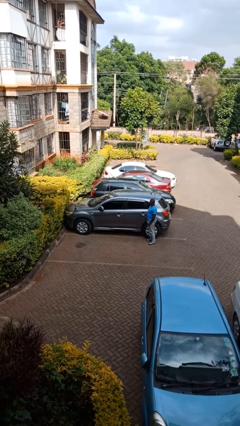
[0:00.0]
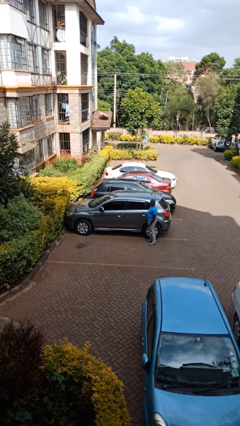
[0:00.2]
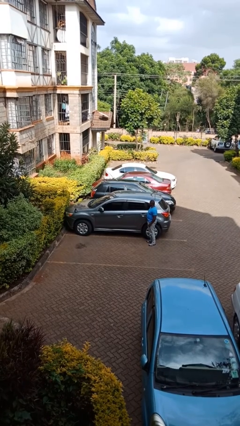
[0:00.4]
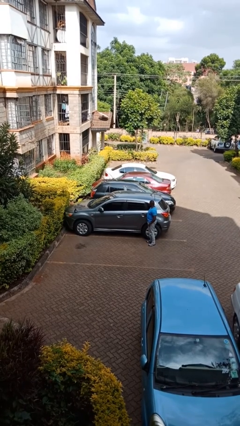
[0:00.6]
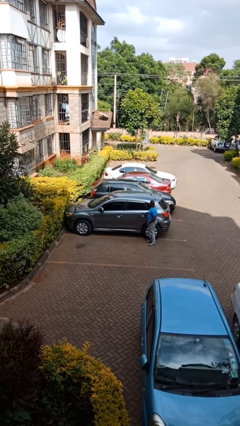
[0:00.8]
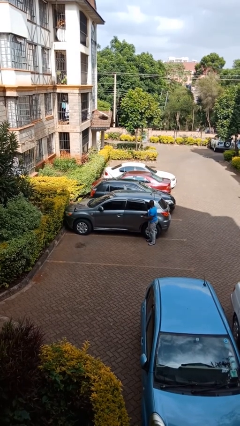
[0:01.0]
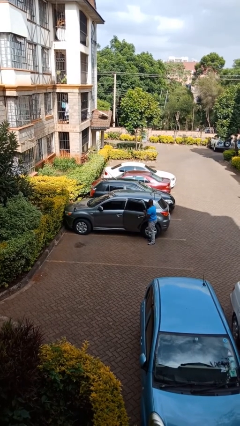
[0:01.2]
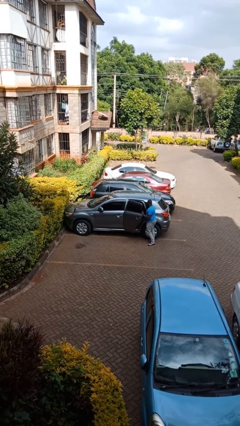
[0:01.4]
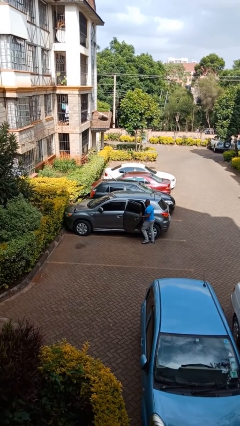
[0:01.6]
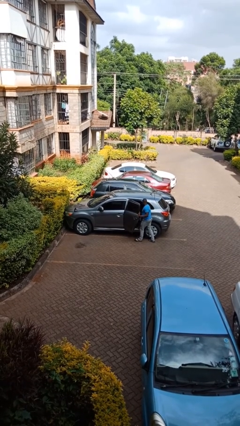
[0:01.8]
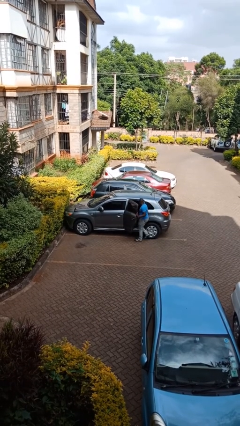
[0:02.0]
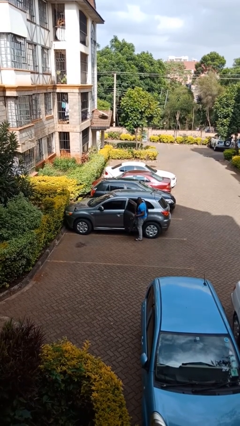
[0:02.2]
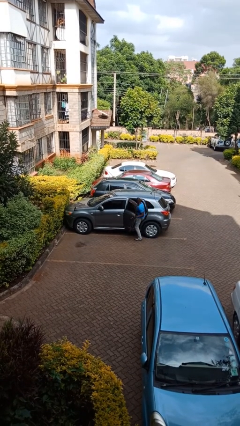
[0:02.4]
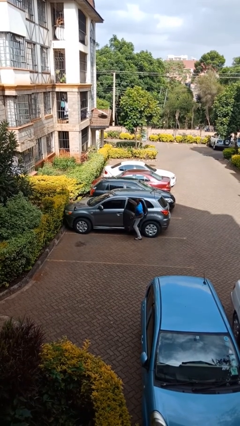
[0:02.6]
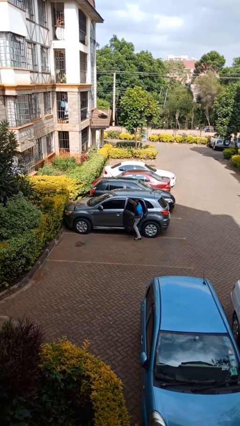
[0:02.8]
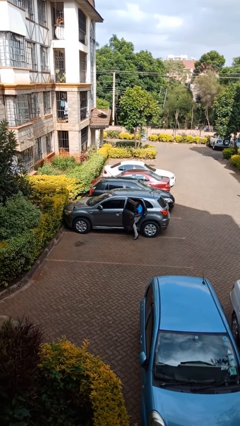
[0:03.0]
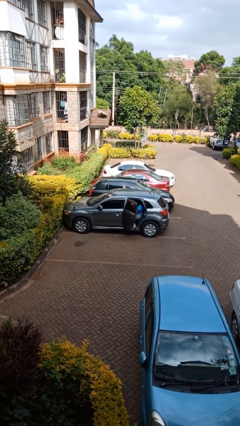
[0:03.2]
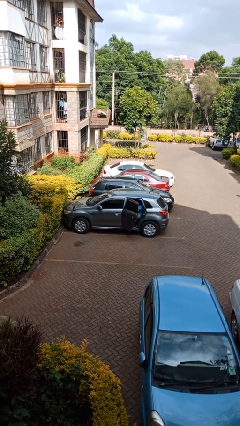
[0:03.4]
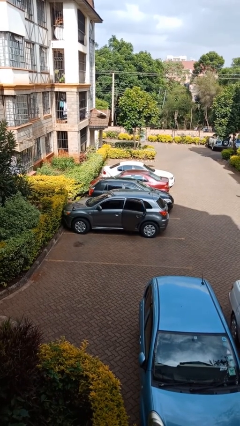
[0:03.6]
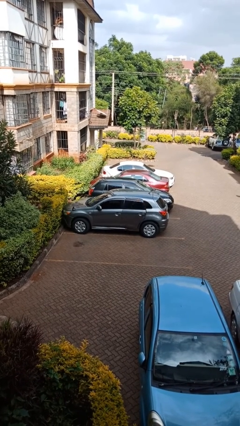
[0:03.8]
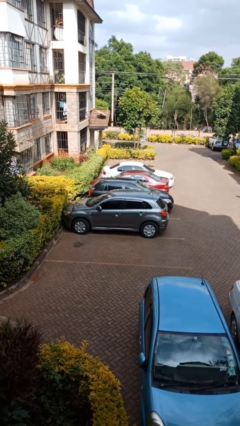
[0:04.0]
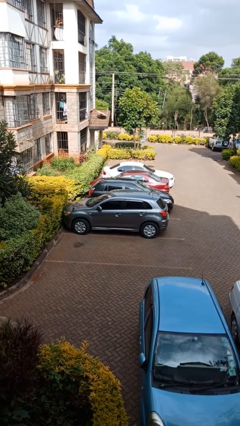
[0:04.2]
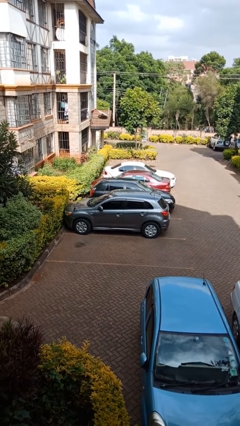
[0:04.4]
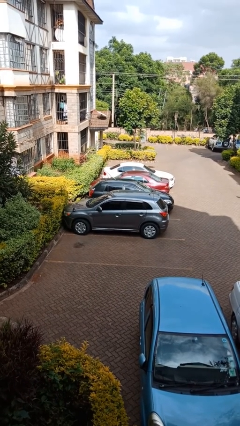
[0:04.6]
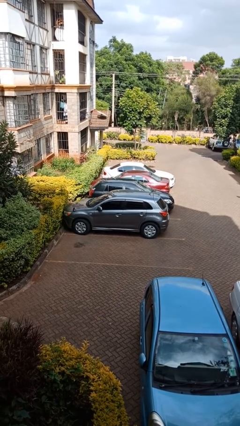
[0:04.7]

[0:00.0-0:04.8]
car picks up person

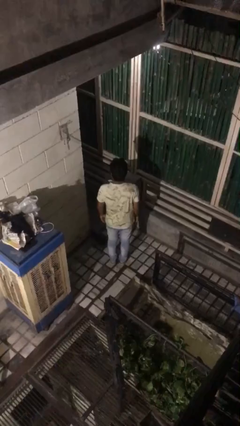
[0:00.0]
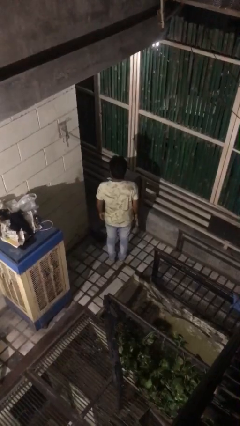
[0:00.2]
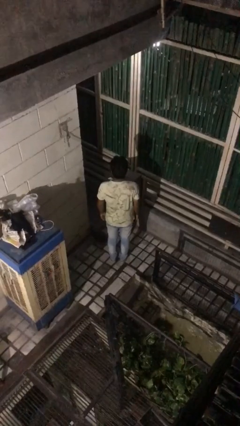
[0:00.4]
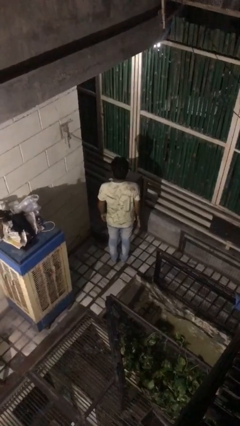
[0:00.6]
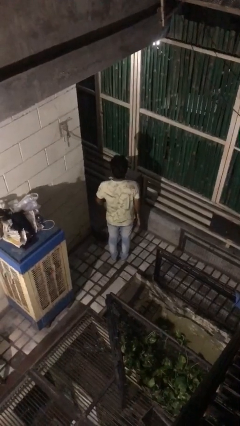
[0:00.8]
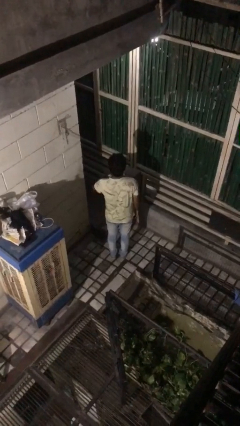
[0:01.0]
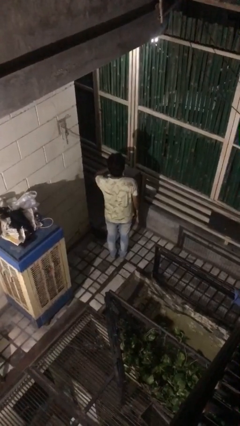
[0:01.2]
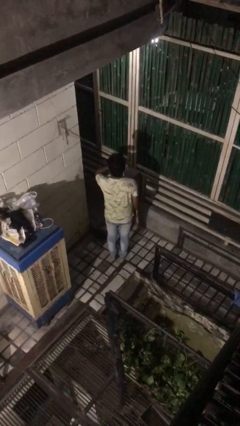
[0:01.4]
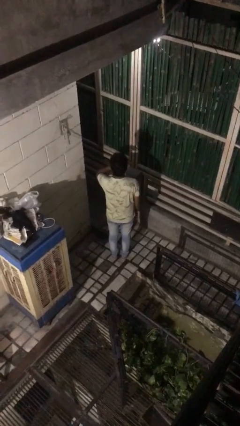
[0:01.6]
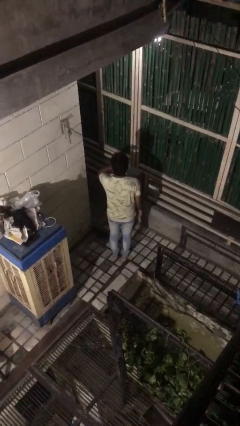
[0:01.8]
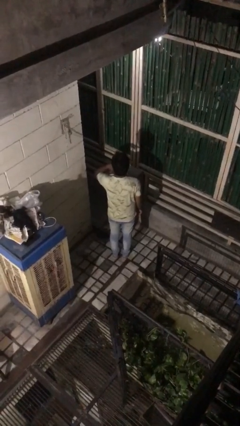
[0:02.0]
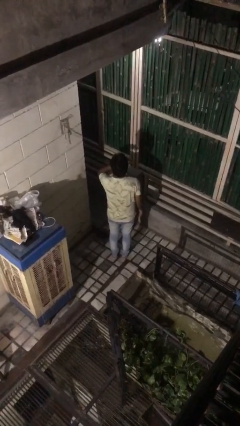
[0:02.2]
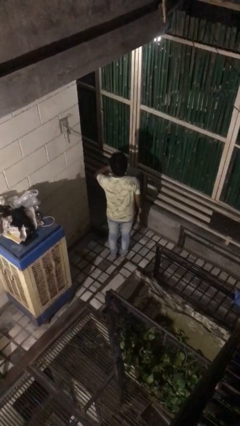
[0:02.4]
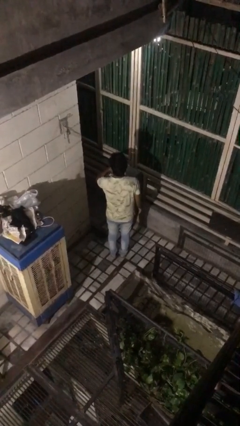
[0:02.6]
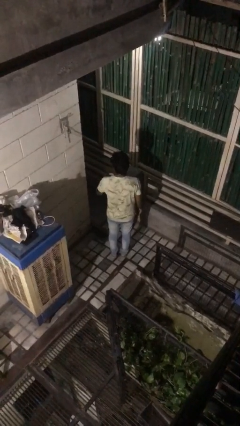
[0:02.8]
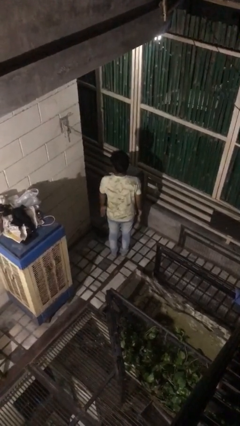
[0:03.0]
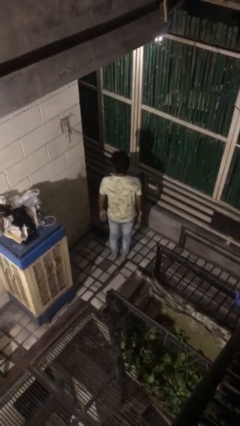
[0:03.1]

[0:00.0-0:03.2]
person gestures cut

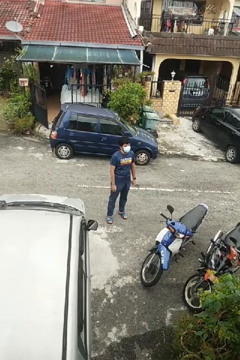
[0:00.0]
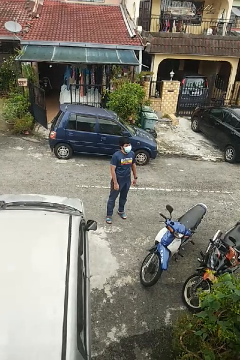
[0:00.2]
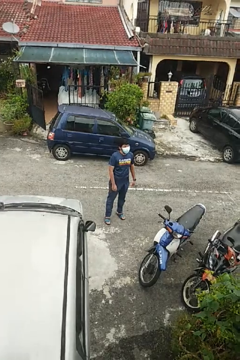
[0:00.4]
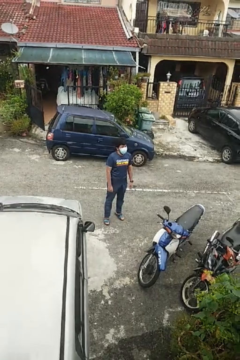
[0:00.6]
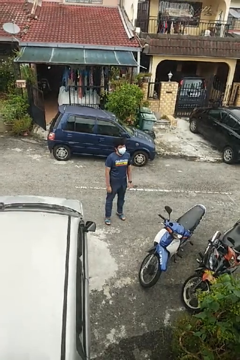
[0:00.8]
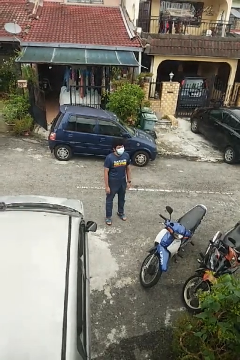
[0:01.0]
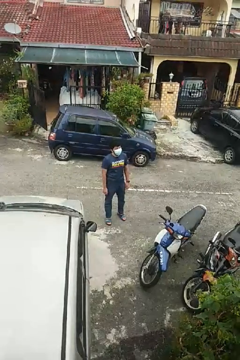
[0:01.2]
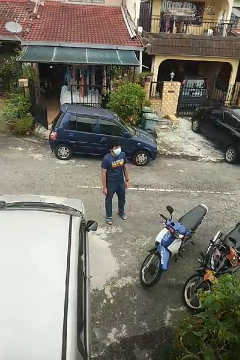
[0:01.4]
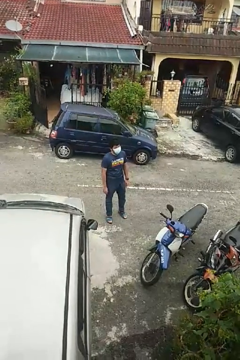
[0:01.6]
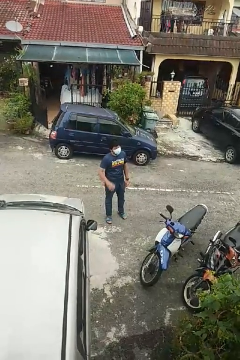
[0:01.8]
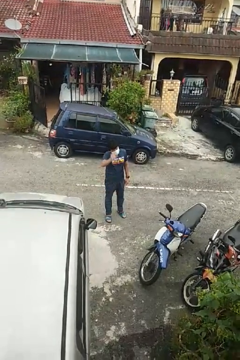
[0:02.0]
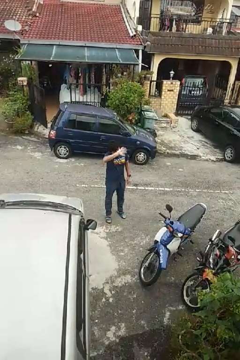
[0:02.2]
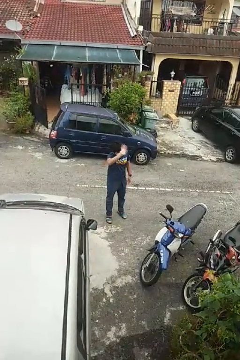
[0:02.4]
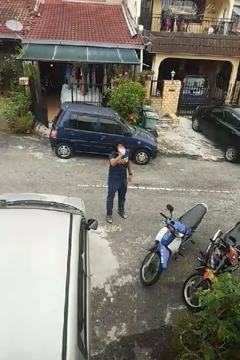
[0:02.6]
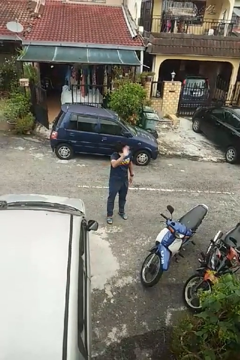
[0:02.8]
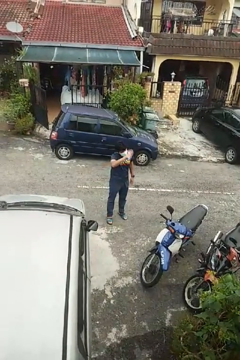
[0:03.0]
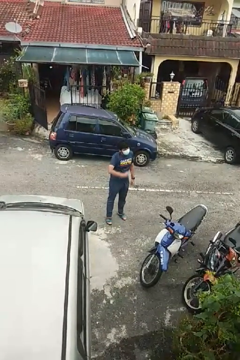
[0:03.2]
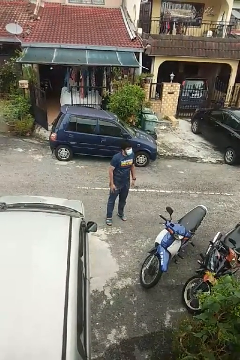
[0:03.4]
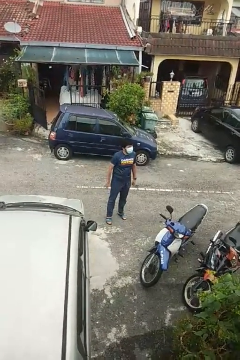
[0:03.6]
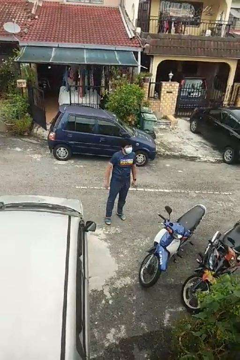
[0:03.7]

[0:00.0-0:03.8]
person waves at person

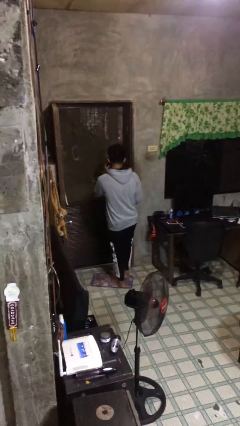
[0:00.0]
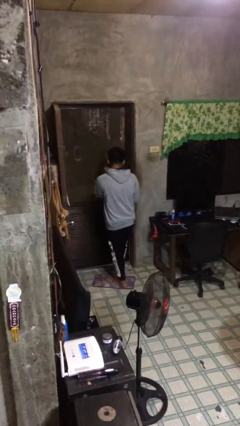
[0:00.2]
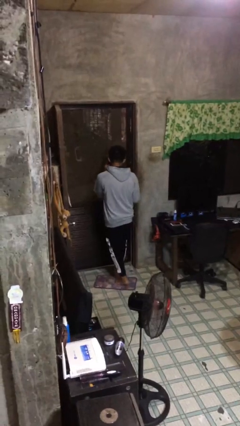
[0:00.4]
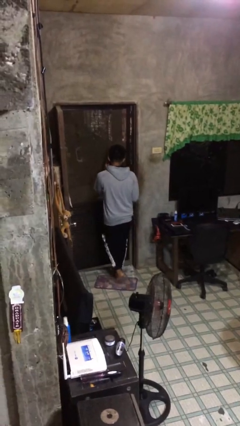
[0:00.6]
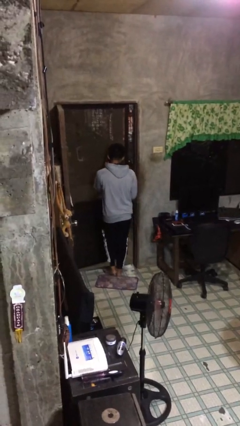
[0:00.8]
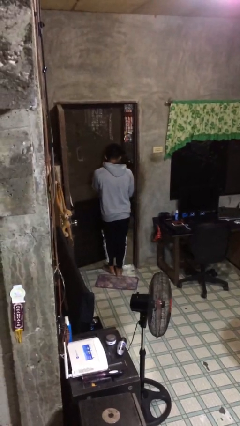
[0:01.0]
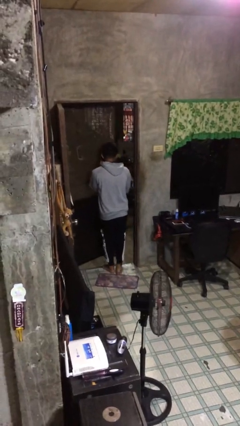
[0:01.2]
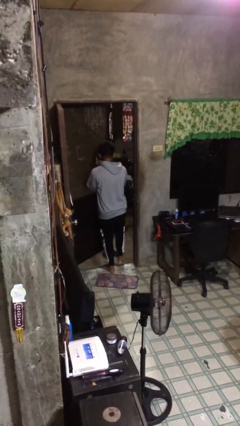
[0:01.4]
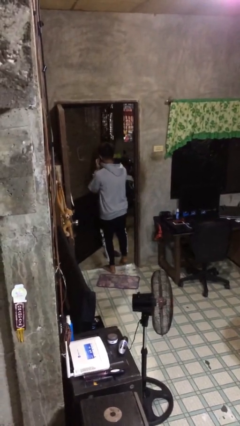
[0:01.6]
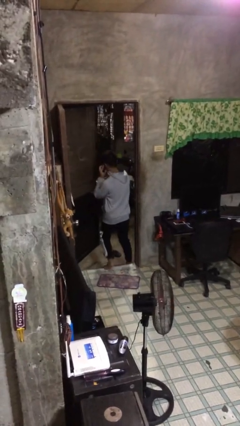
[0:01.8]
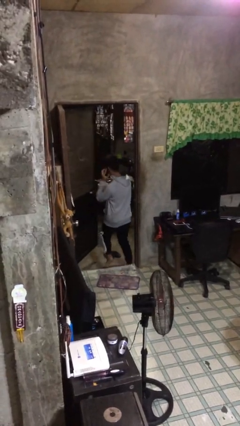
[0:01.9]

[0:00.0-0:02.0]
person opens facility door

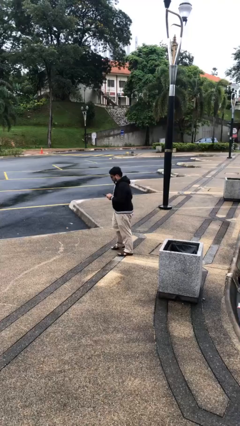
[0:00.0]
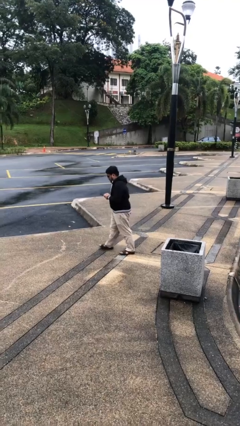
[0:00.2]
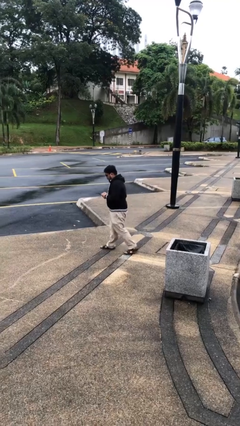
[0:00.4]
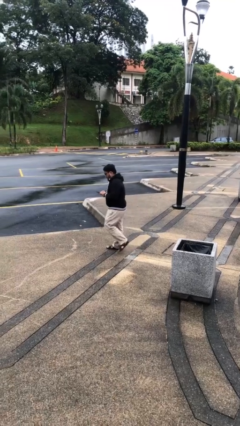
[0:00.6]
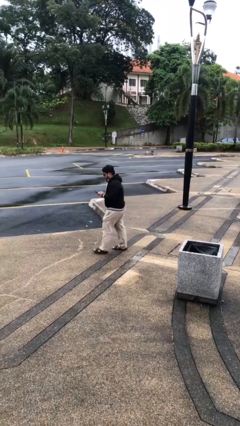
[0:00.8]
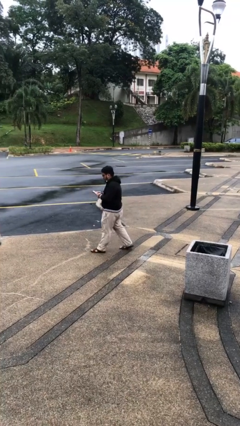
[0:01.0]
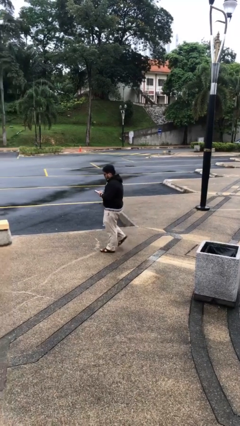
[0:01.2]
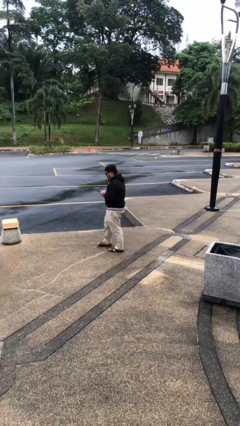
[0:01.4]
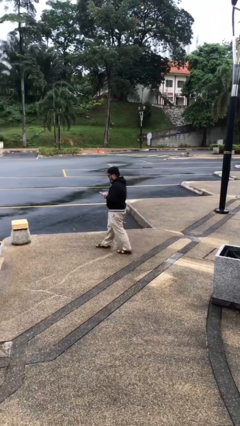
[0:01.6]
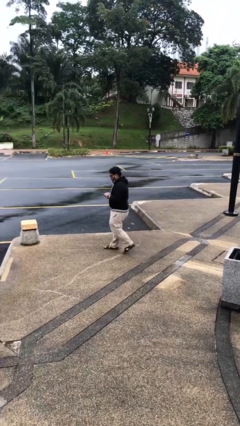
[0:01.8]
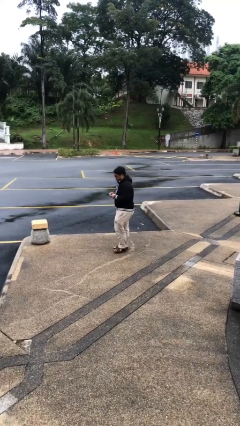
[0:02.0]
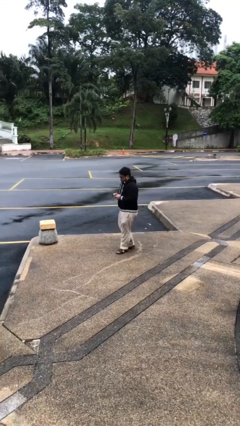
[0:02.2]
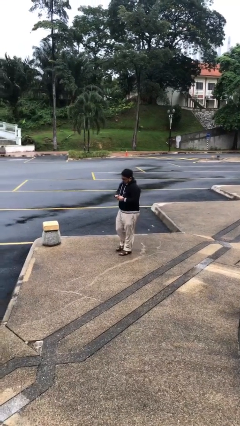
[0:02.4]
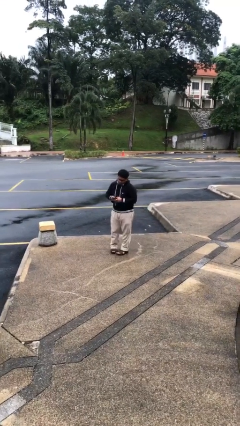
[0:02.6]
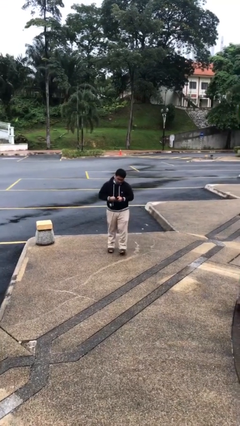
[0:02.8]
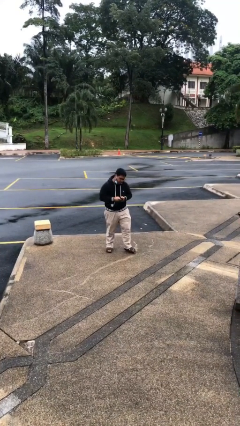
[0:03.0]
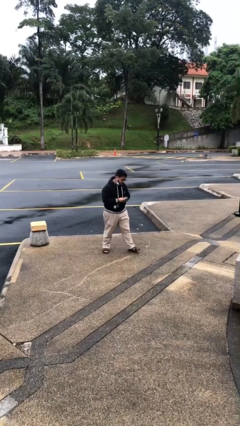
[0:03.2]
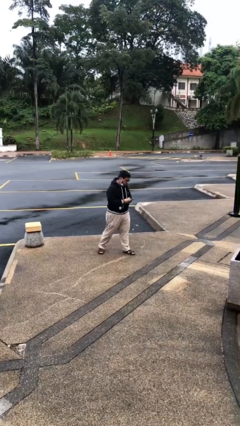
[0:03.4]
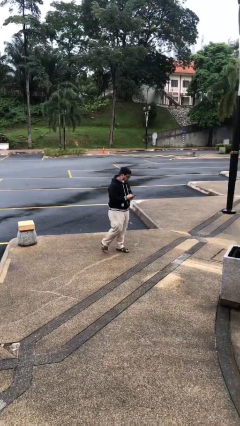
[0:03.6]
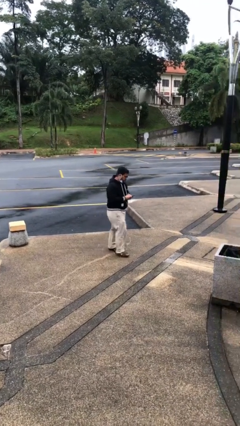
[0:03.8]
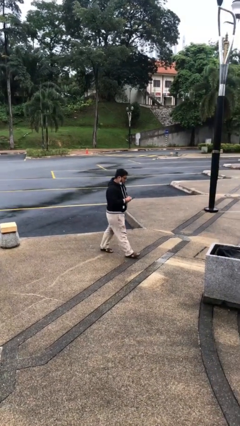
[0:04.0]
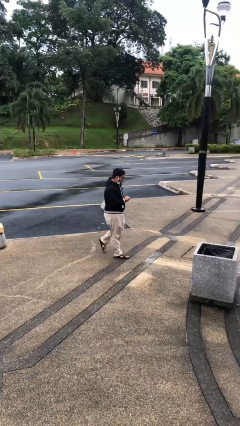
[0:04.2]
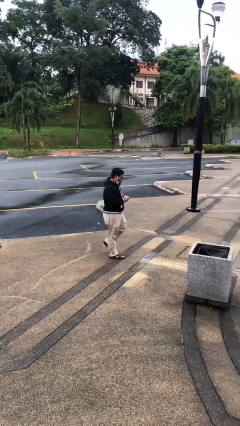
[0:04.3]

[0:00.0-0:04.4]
person texts on phone

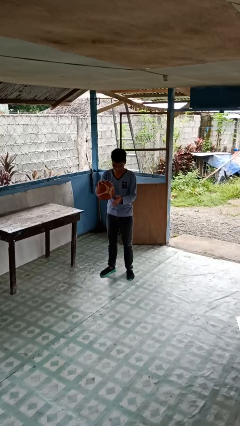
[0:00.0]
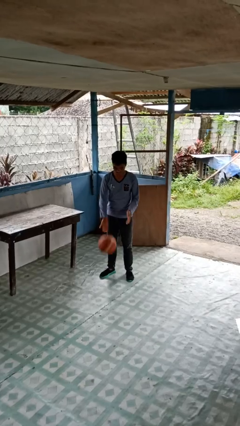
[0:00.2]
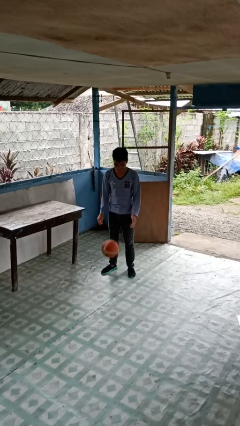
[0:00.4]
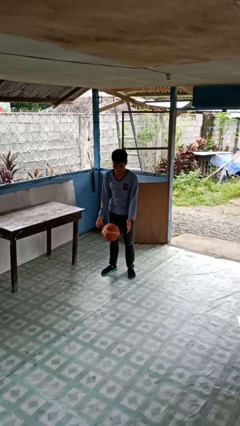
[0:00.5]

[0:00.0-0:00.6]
person bounces ball on floor
